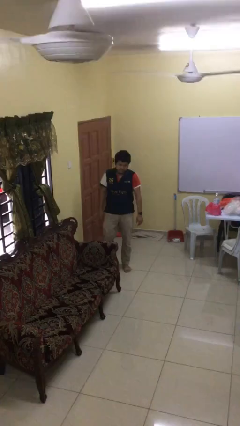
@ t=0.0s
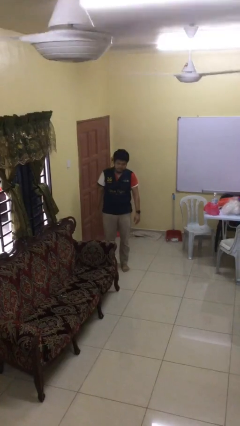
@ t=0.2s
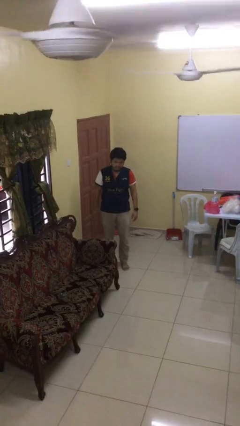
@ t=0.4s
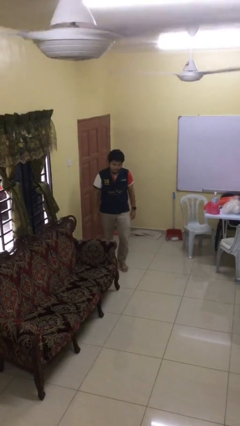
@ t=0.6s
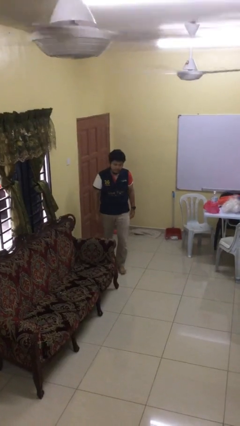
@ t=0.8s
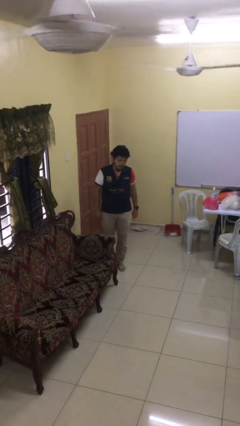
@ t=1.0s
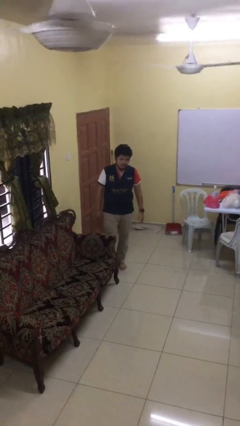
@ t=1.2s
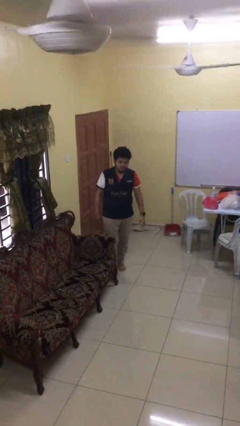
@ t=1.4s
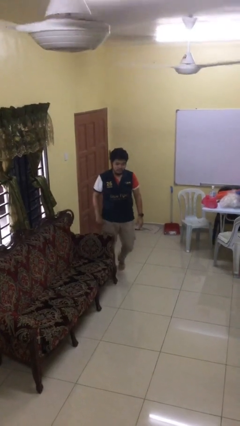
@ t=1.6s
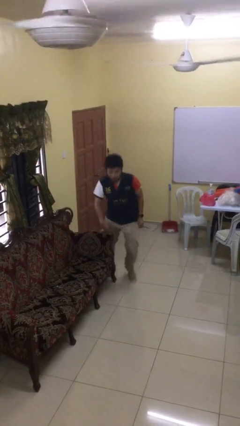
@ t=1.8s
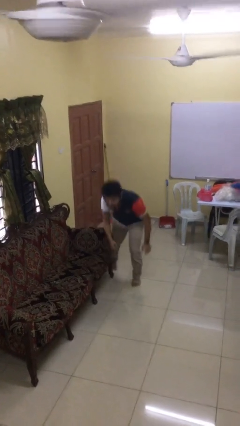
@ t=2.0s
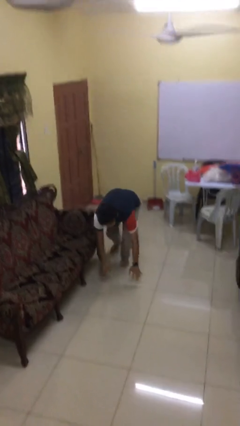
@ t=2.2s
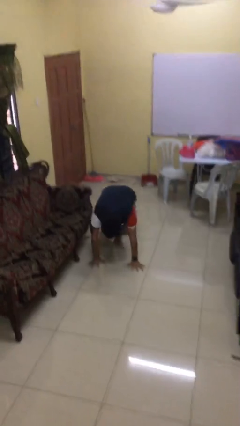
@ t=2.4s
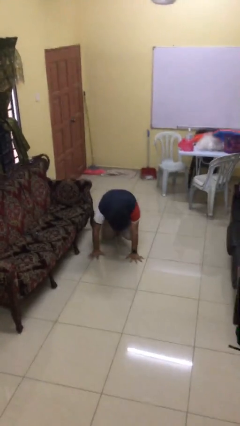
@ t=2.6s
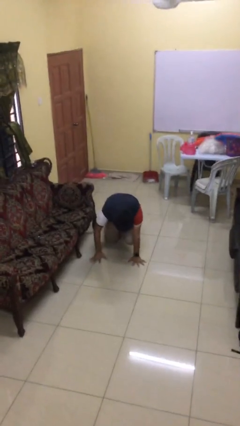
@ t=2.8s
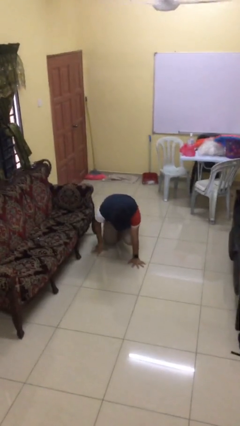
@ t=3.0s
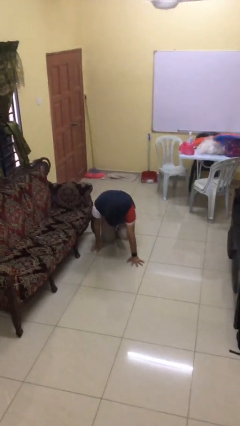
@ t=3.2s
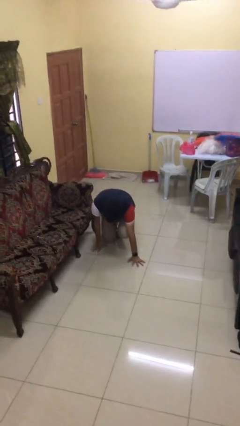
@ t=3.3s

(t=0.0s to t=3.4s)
person trips on object on floor

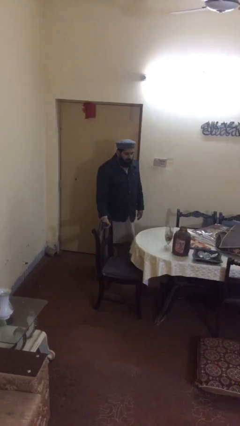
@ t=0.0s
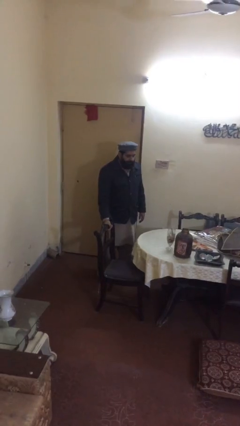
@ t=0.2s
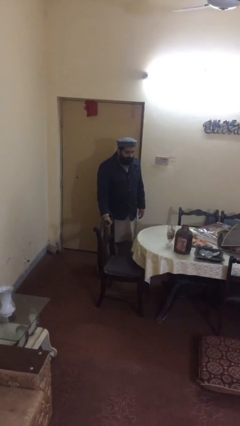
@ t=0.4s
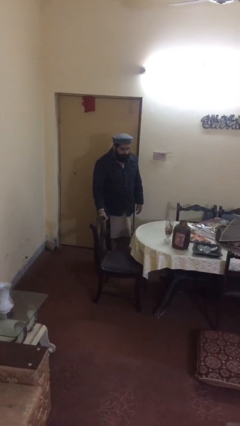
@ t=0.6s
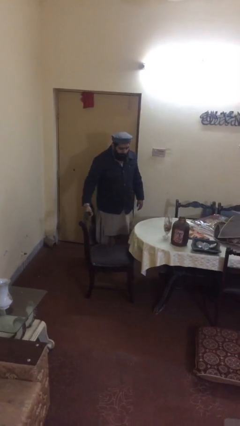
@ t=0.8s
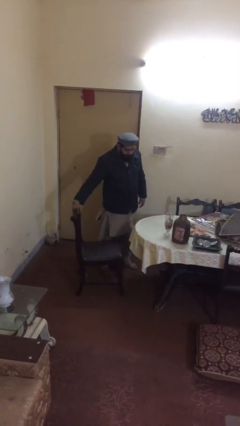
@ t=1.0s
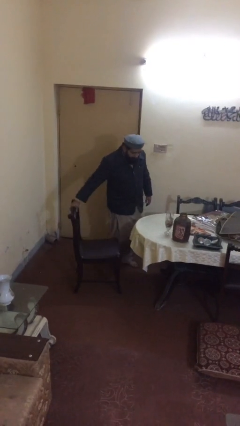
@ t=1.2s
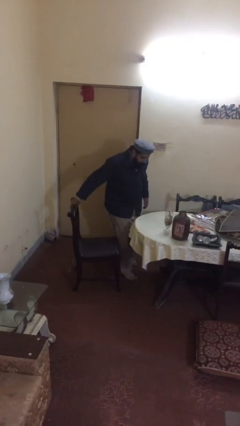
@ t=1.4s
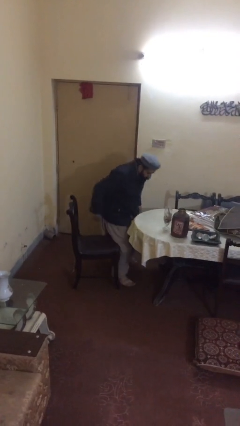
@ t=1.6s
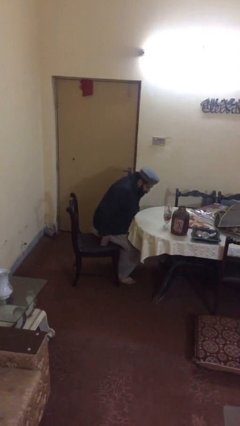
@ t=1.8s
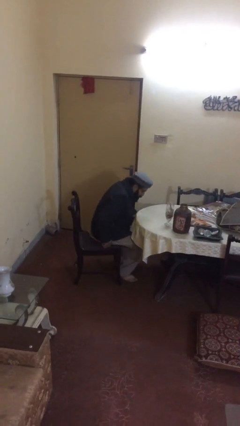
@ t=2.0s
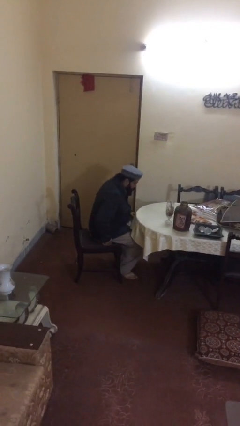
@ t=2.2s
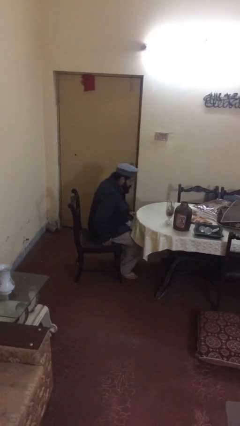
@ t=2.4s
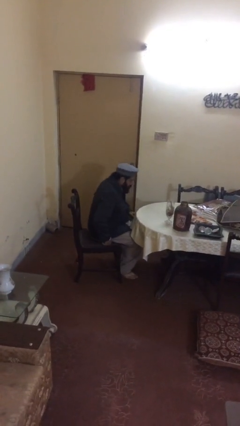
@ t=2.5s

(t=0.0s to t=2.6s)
person sits down

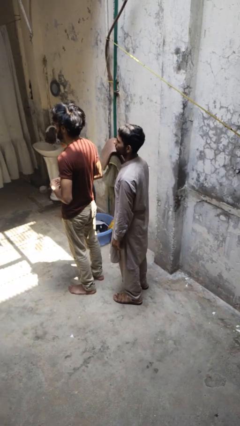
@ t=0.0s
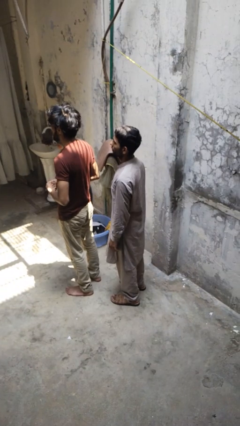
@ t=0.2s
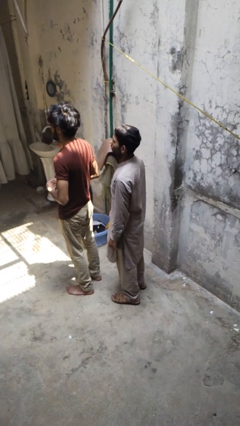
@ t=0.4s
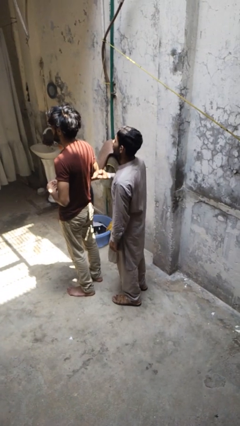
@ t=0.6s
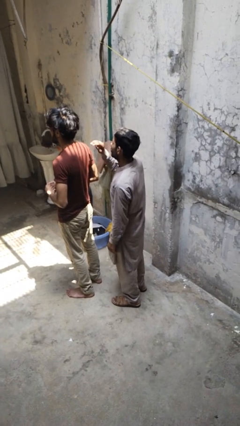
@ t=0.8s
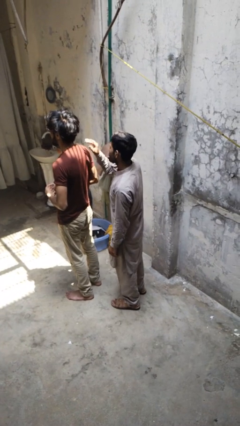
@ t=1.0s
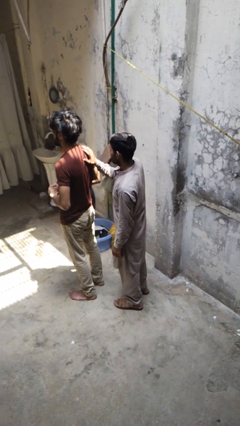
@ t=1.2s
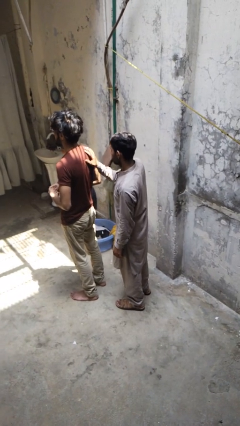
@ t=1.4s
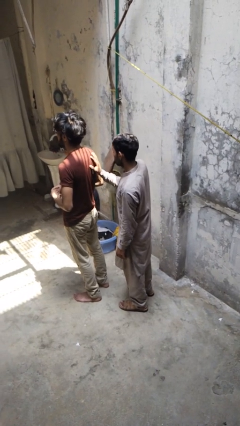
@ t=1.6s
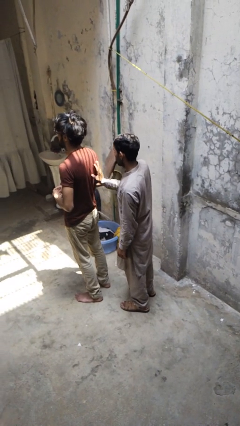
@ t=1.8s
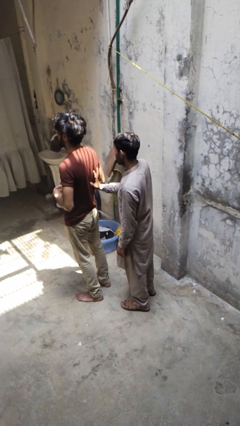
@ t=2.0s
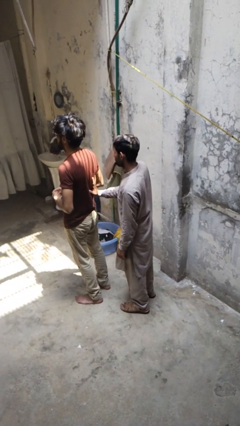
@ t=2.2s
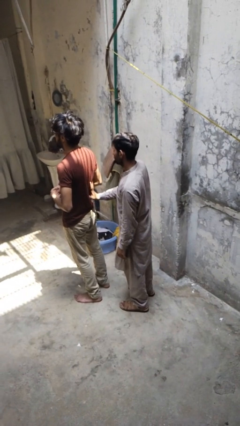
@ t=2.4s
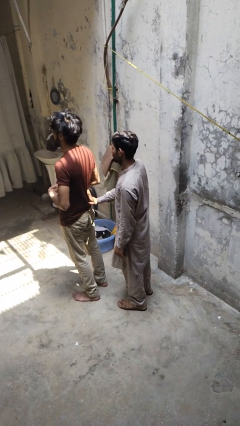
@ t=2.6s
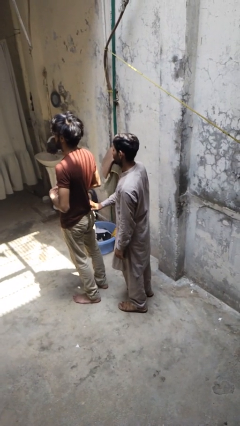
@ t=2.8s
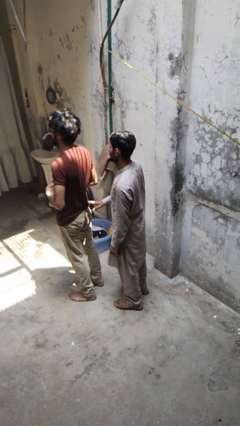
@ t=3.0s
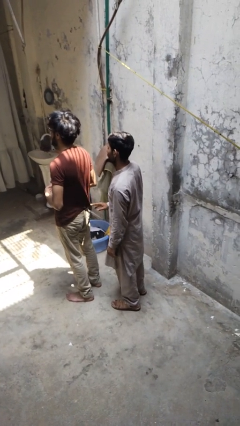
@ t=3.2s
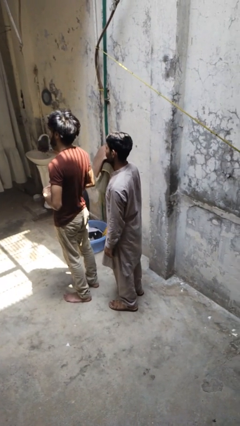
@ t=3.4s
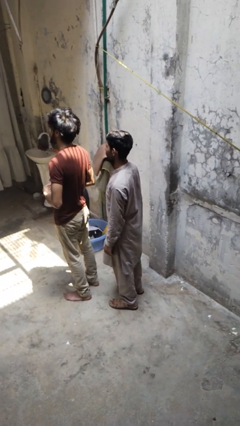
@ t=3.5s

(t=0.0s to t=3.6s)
person touches back of person

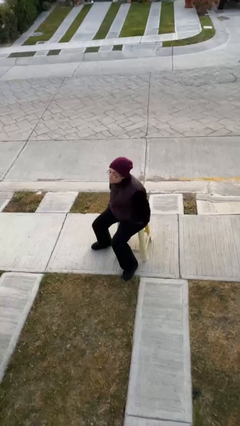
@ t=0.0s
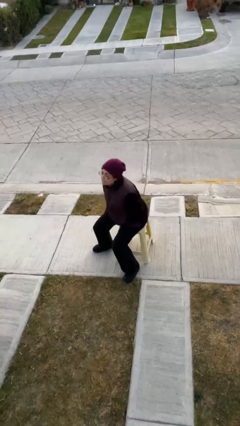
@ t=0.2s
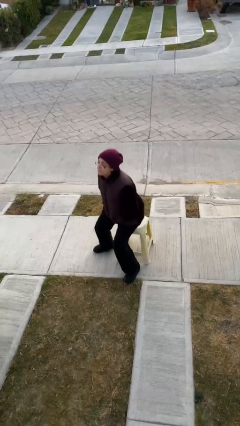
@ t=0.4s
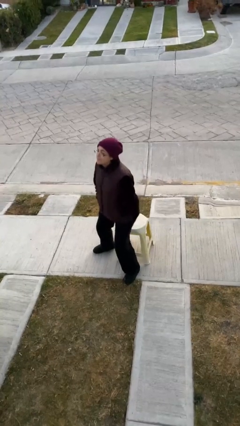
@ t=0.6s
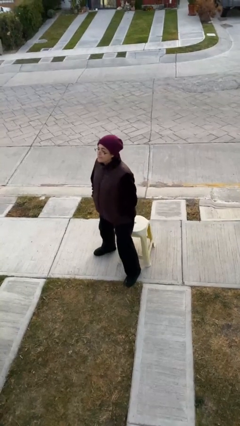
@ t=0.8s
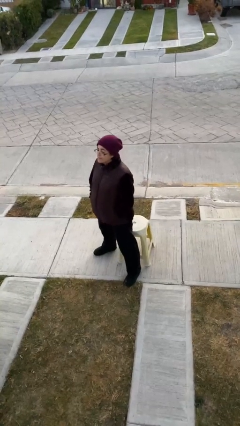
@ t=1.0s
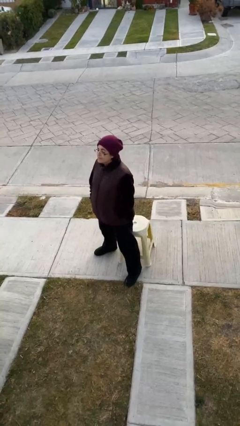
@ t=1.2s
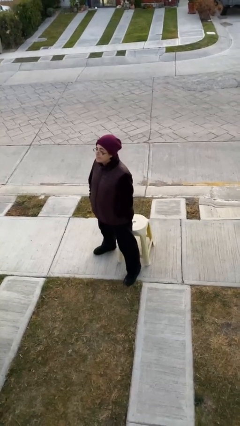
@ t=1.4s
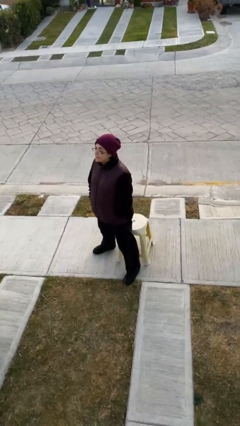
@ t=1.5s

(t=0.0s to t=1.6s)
person stands up

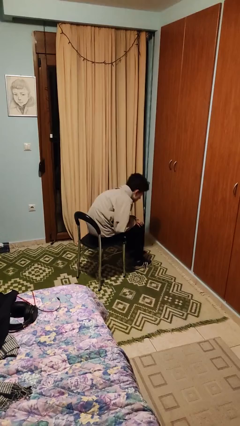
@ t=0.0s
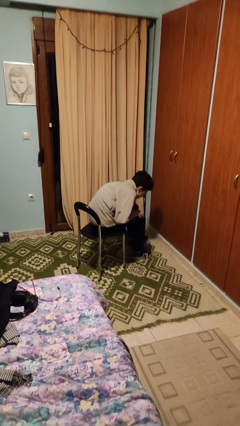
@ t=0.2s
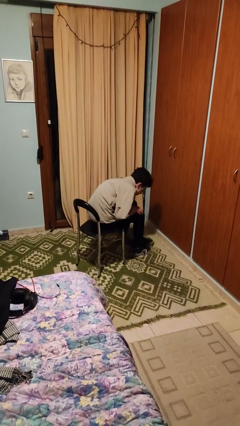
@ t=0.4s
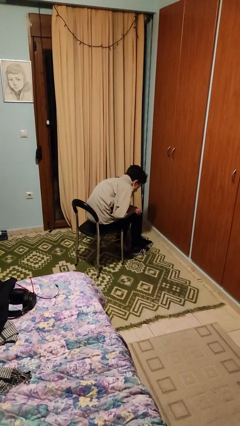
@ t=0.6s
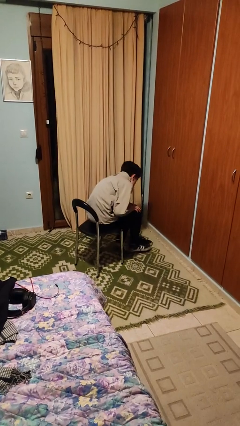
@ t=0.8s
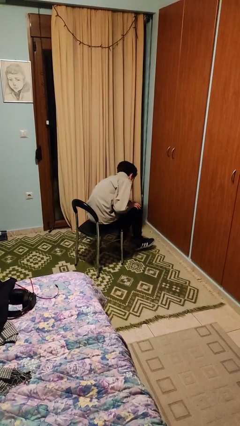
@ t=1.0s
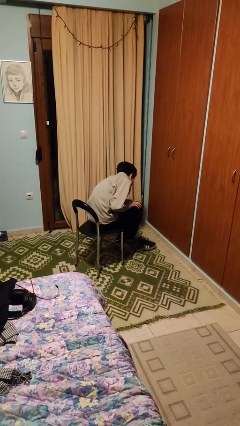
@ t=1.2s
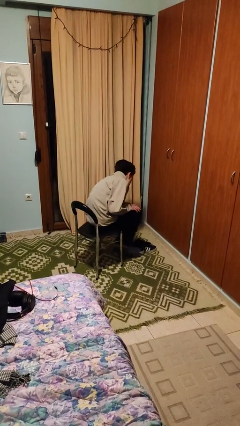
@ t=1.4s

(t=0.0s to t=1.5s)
person takes off shoes

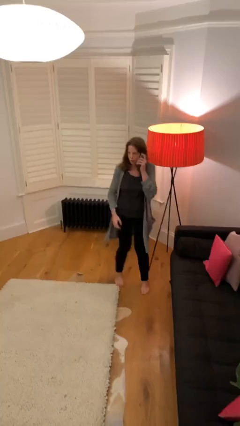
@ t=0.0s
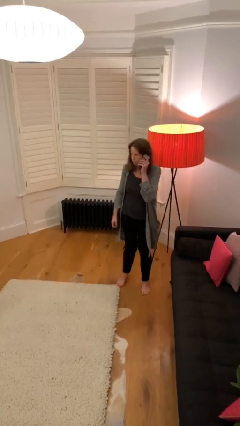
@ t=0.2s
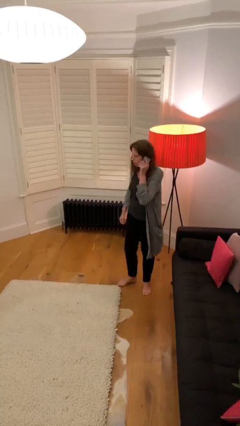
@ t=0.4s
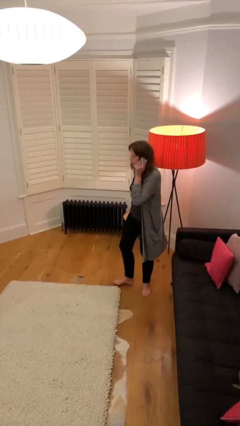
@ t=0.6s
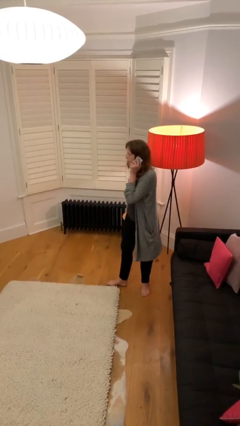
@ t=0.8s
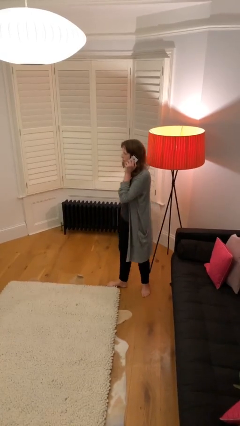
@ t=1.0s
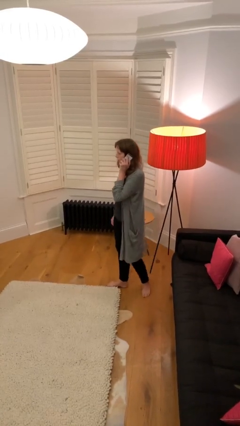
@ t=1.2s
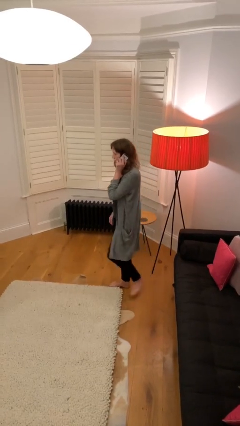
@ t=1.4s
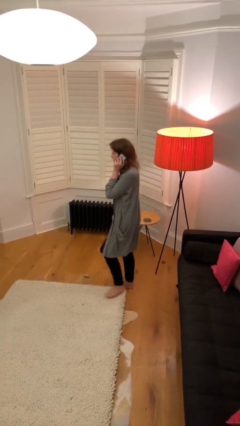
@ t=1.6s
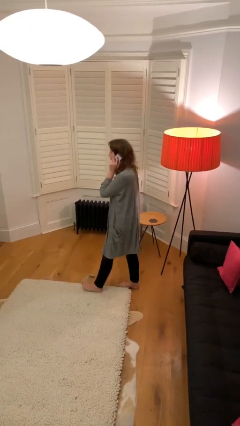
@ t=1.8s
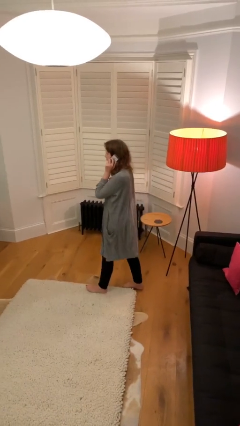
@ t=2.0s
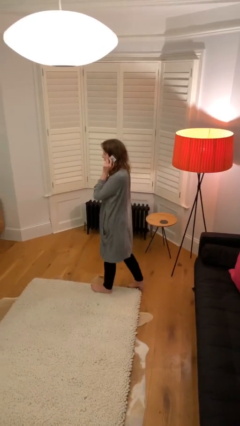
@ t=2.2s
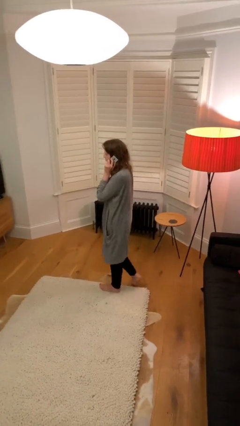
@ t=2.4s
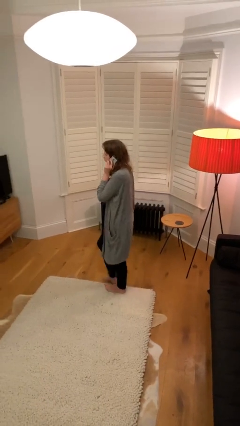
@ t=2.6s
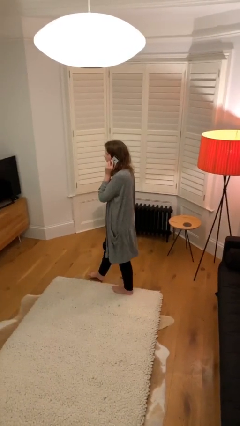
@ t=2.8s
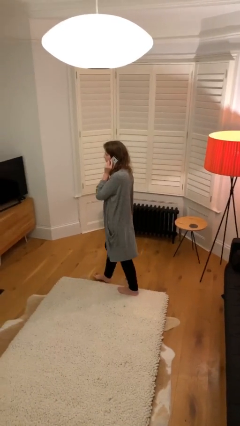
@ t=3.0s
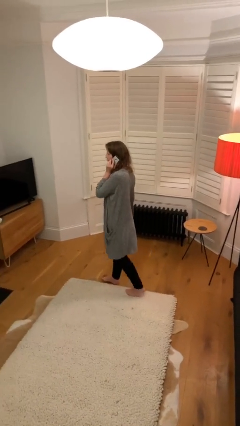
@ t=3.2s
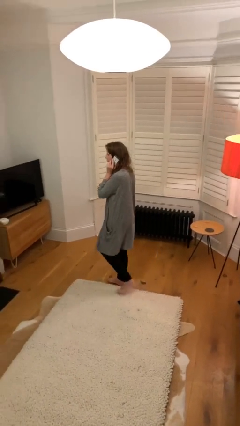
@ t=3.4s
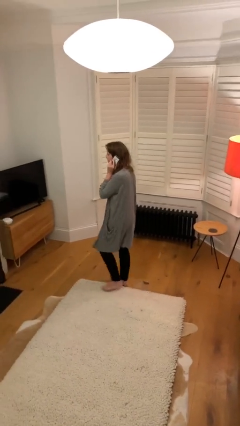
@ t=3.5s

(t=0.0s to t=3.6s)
person talks on phone

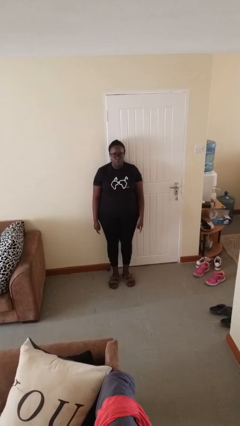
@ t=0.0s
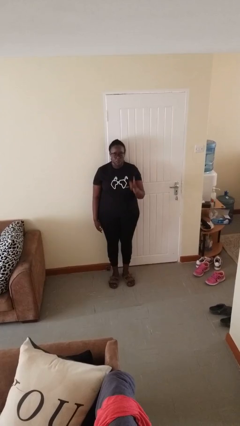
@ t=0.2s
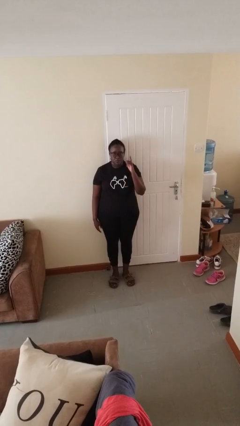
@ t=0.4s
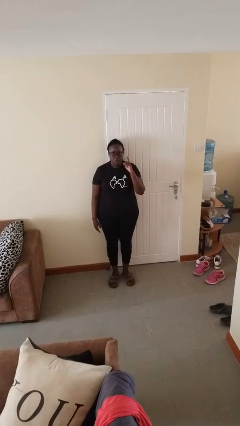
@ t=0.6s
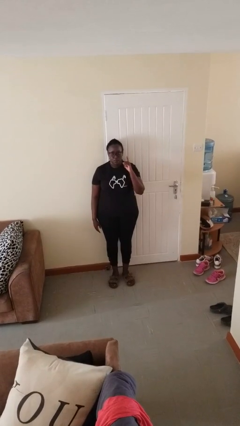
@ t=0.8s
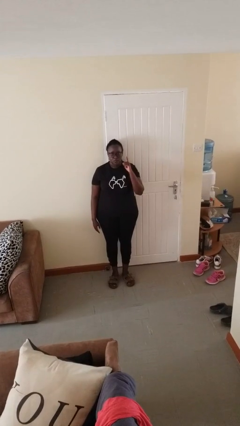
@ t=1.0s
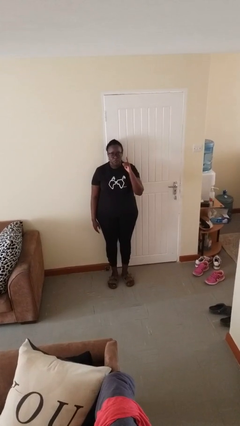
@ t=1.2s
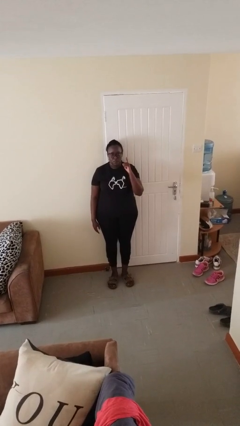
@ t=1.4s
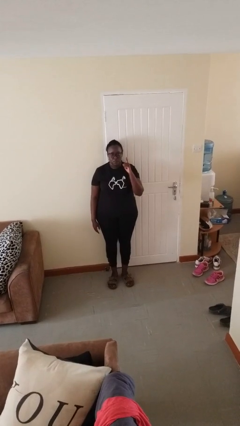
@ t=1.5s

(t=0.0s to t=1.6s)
person gestures number one
